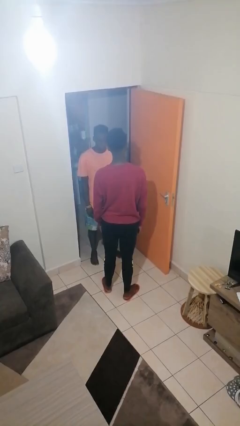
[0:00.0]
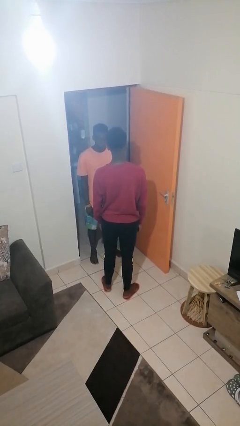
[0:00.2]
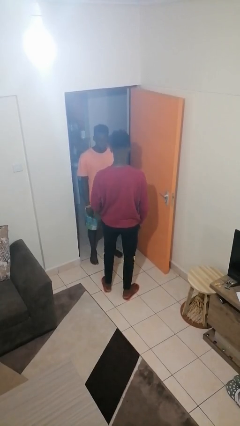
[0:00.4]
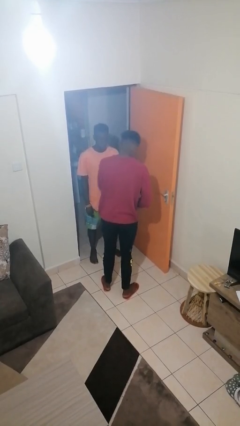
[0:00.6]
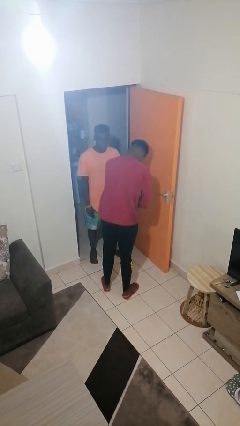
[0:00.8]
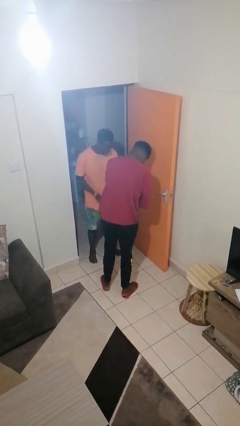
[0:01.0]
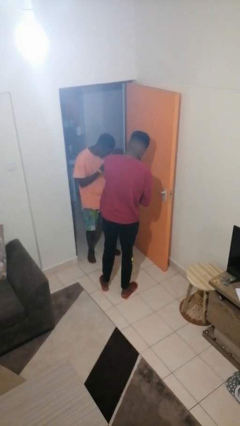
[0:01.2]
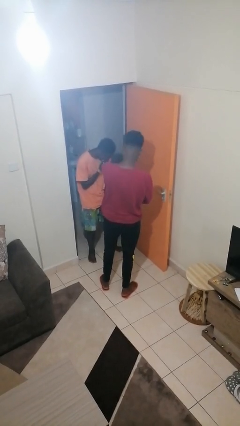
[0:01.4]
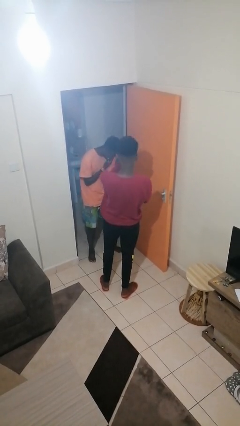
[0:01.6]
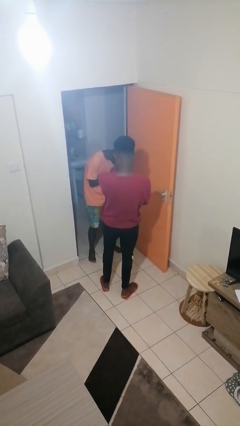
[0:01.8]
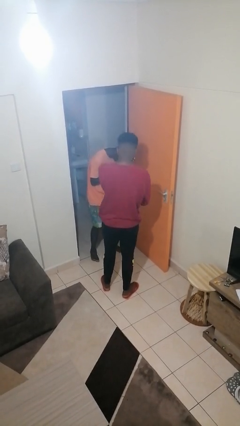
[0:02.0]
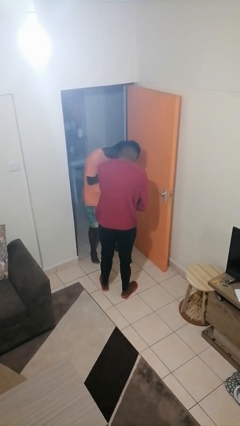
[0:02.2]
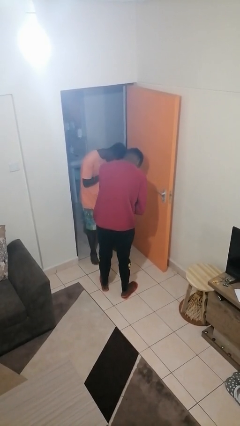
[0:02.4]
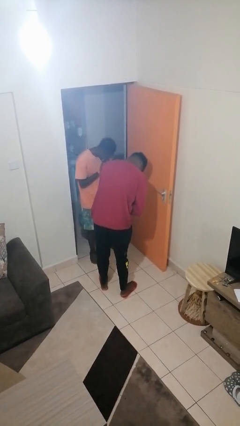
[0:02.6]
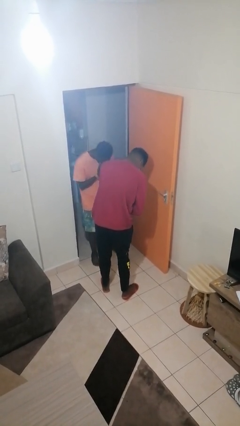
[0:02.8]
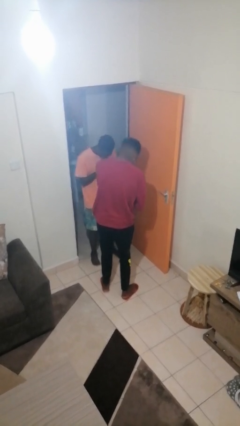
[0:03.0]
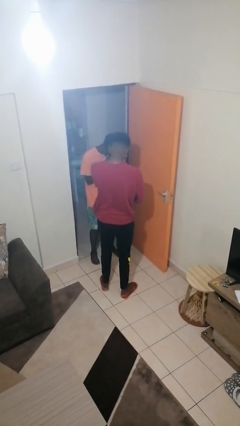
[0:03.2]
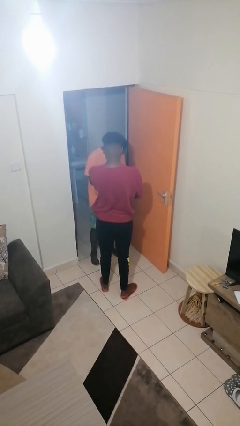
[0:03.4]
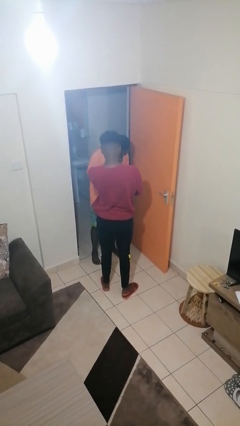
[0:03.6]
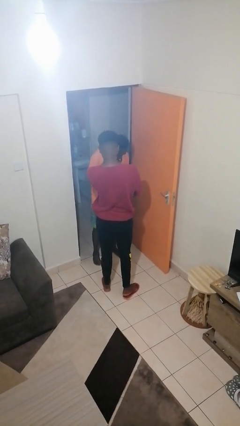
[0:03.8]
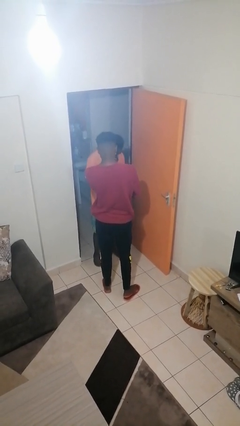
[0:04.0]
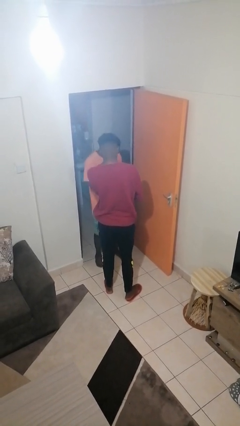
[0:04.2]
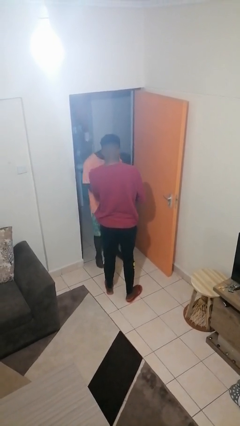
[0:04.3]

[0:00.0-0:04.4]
person laughs with person

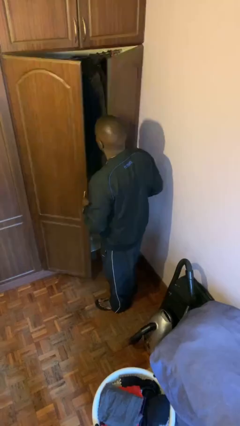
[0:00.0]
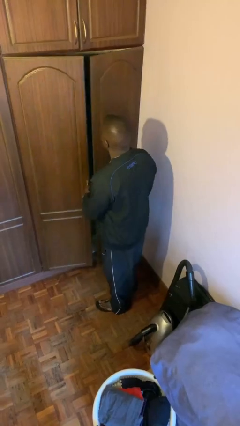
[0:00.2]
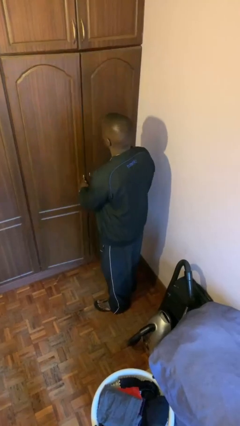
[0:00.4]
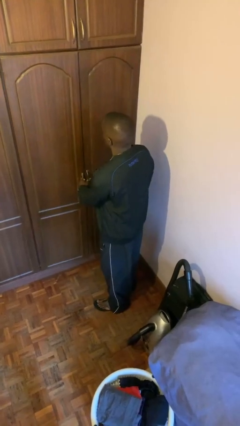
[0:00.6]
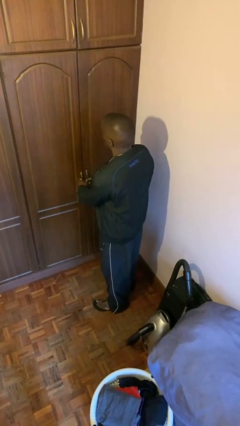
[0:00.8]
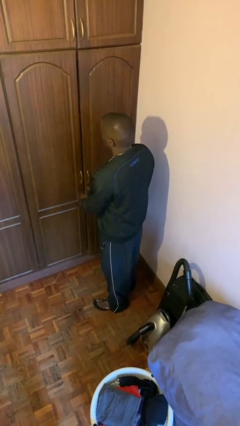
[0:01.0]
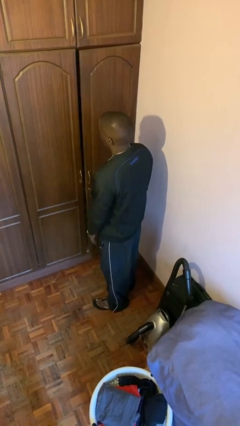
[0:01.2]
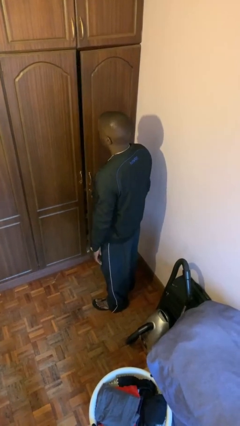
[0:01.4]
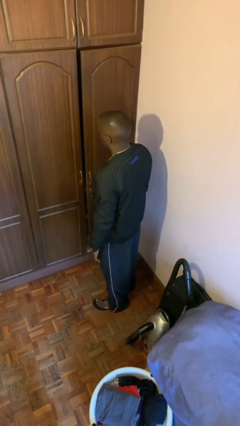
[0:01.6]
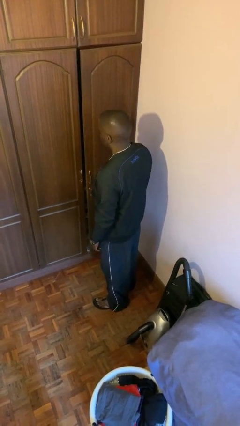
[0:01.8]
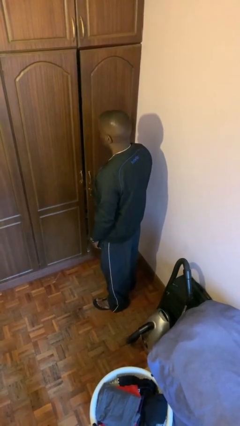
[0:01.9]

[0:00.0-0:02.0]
person closes closet door

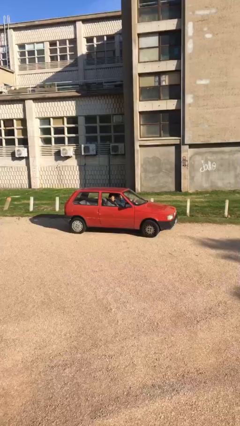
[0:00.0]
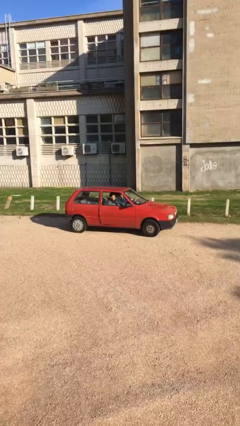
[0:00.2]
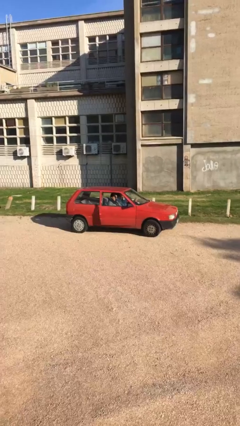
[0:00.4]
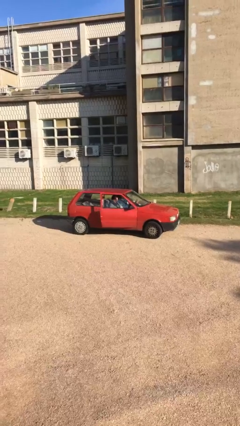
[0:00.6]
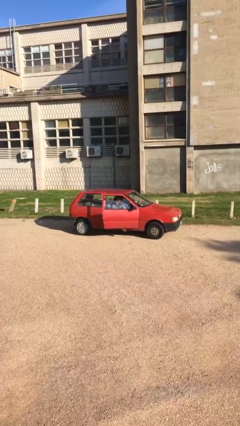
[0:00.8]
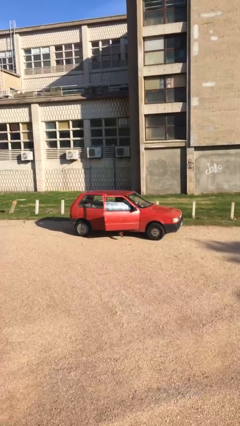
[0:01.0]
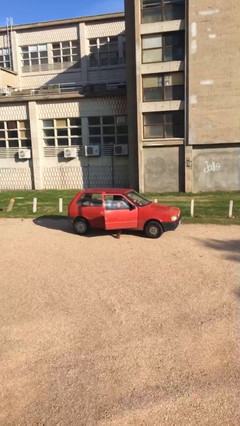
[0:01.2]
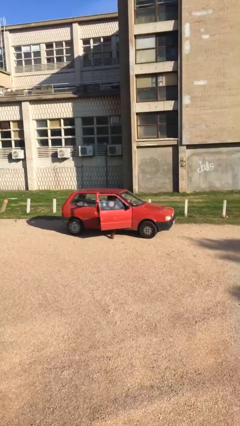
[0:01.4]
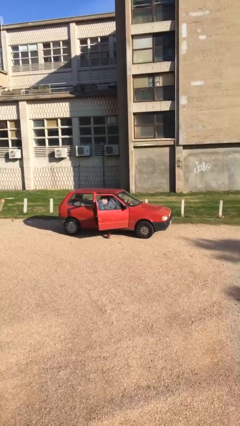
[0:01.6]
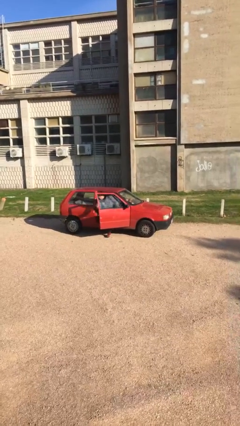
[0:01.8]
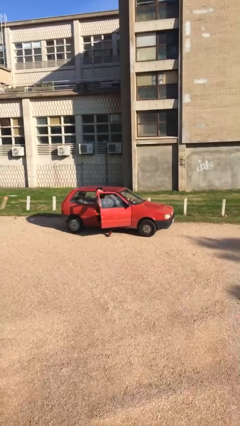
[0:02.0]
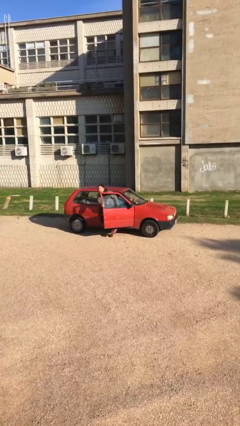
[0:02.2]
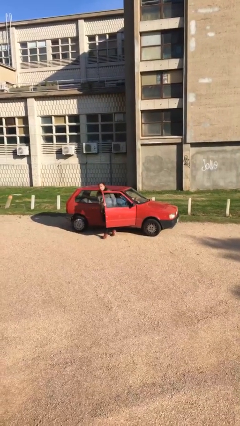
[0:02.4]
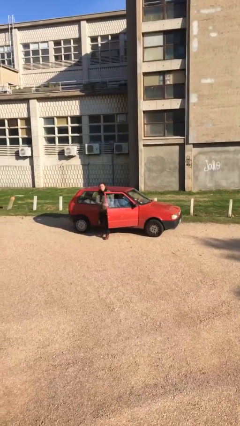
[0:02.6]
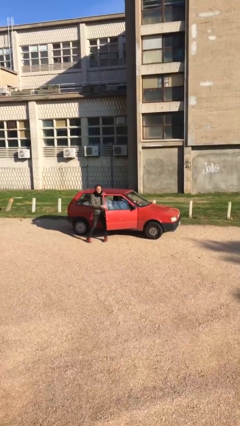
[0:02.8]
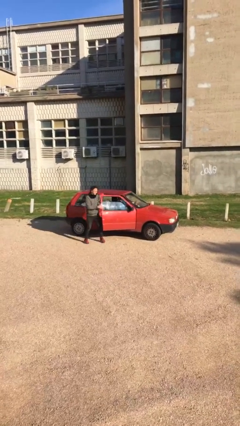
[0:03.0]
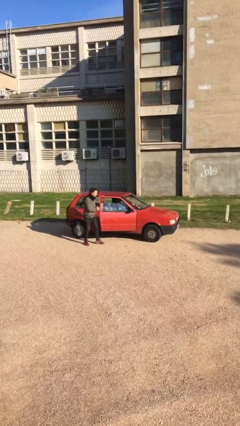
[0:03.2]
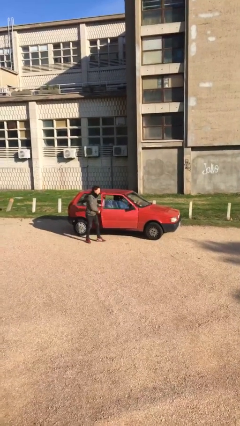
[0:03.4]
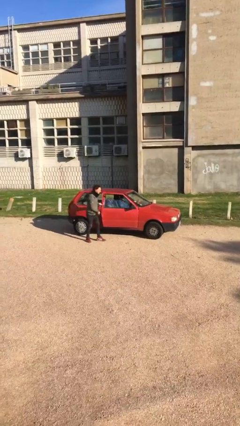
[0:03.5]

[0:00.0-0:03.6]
car drops off person

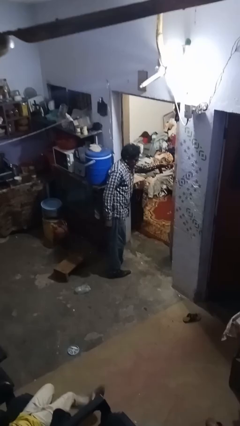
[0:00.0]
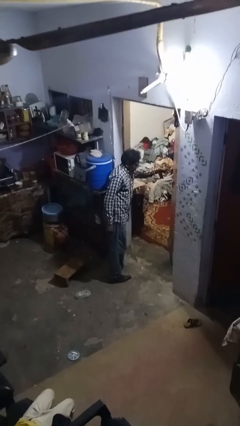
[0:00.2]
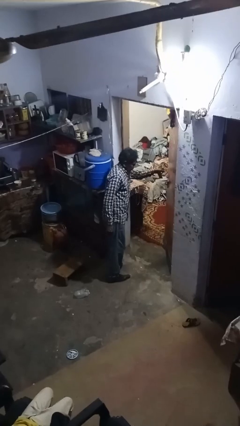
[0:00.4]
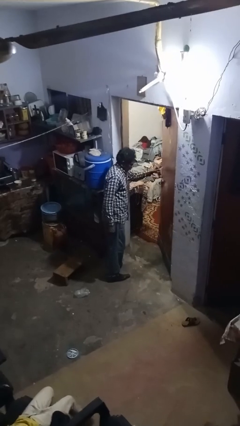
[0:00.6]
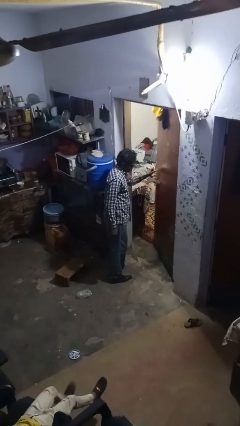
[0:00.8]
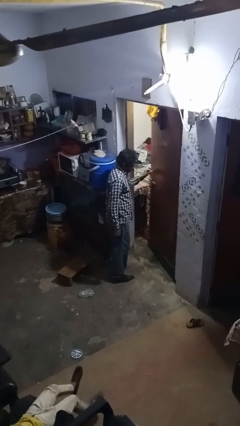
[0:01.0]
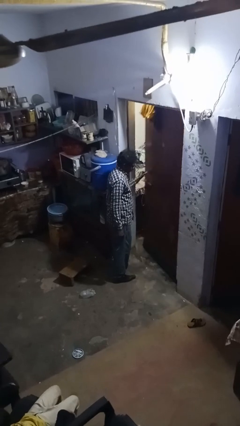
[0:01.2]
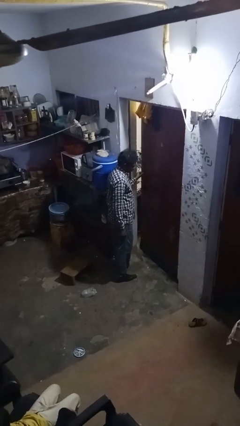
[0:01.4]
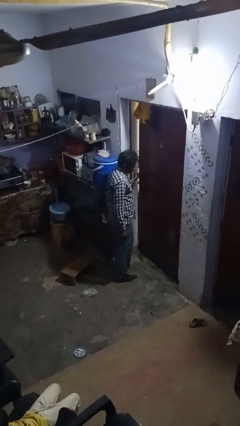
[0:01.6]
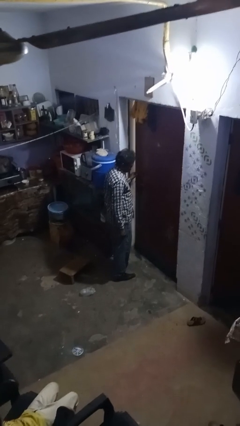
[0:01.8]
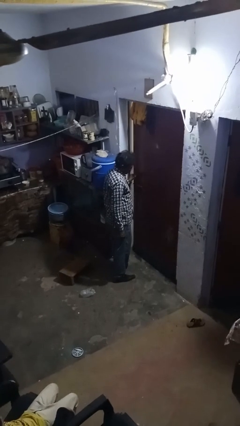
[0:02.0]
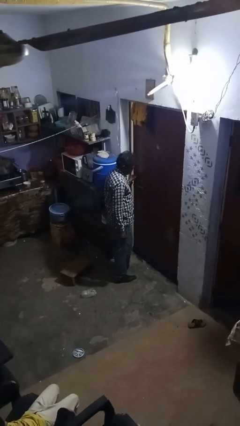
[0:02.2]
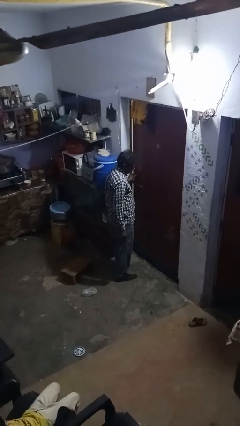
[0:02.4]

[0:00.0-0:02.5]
person closes facility door

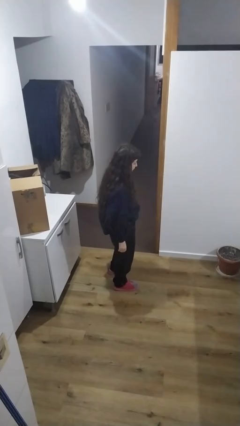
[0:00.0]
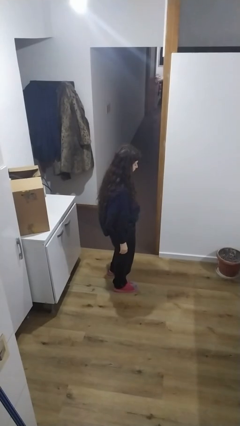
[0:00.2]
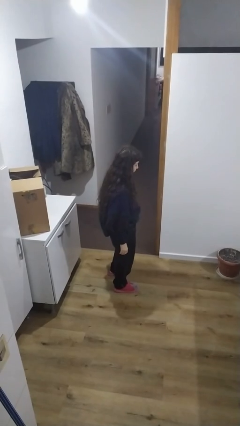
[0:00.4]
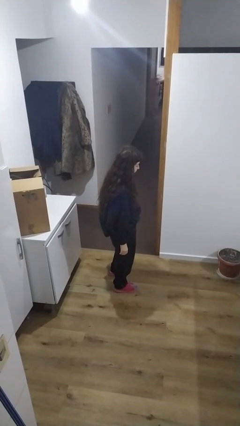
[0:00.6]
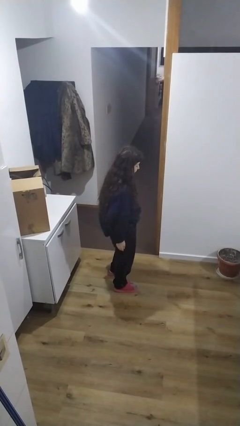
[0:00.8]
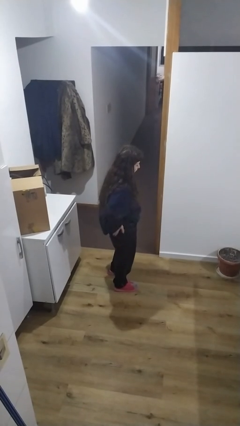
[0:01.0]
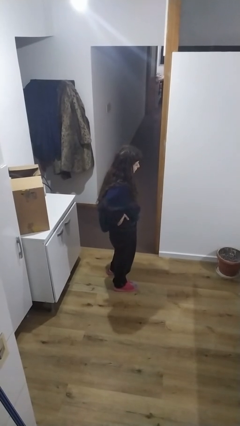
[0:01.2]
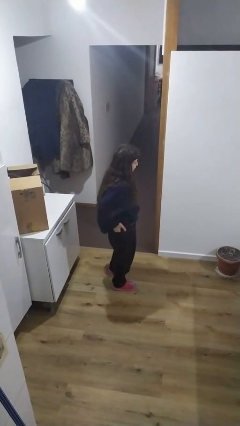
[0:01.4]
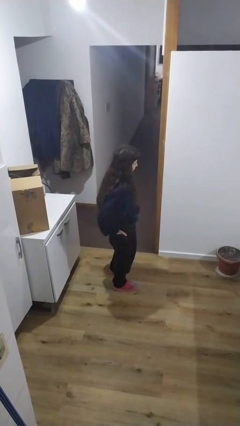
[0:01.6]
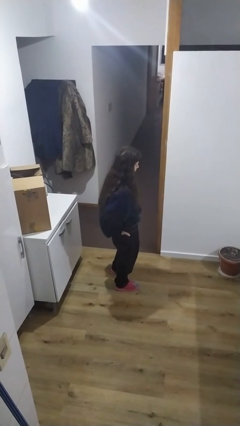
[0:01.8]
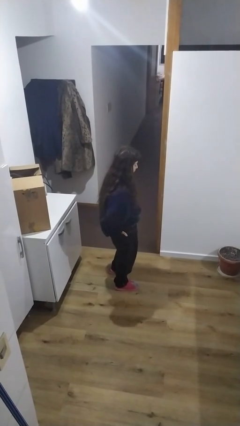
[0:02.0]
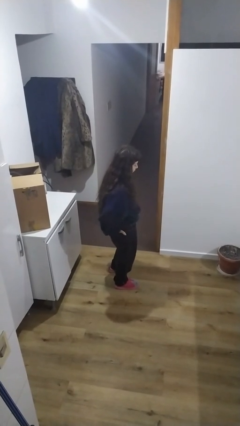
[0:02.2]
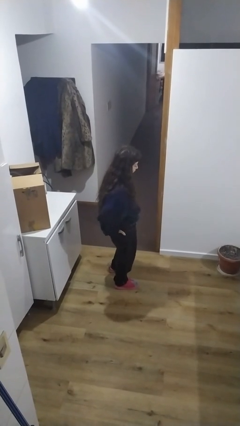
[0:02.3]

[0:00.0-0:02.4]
person puts hands in back pockets

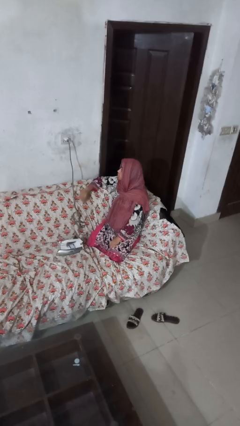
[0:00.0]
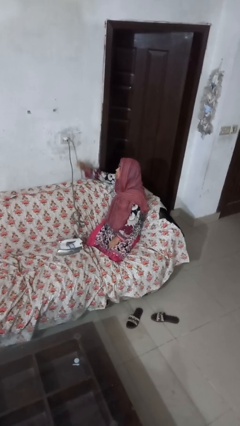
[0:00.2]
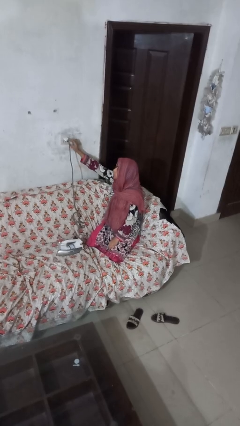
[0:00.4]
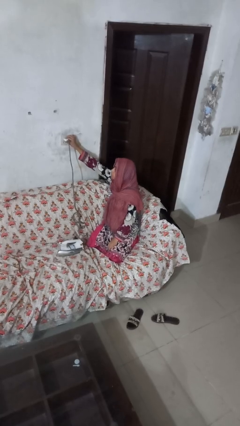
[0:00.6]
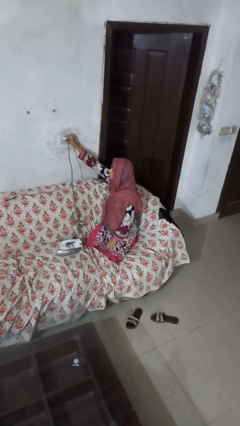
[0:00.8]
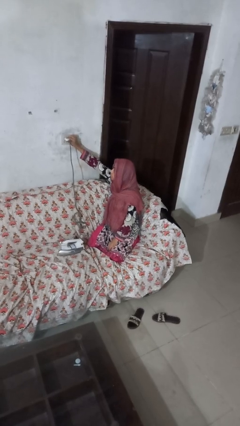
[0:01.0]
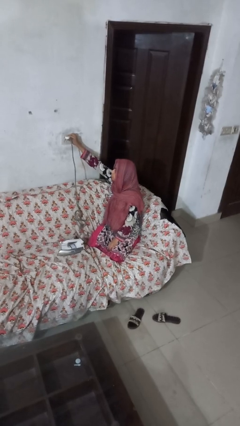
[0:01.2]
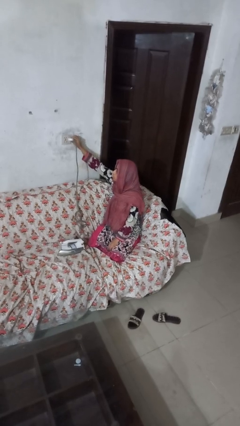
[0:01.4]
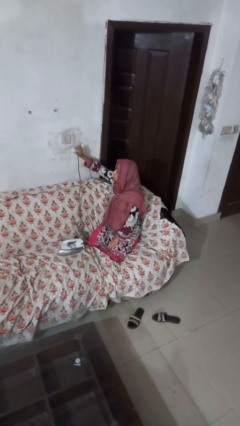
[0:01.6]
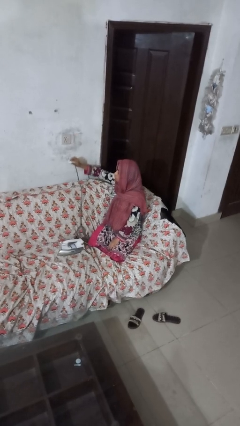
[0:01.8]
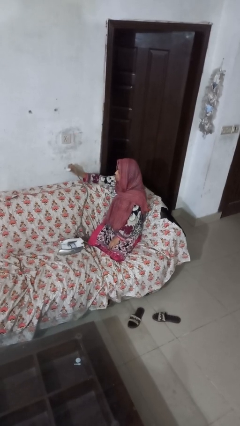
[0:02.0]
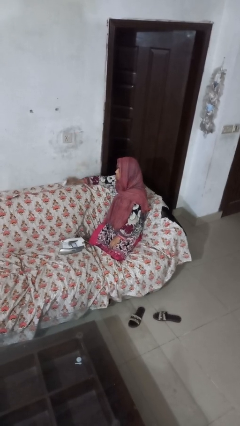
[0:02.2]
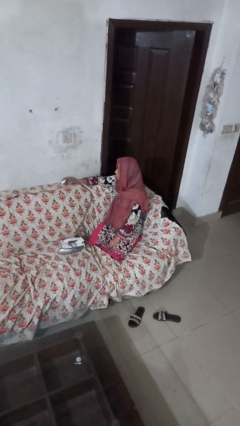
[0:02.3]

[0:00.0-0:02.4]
person unplugs from electrical socket
